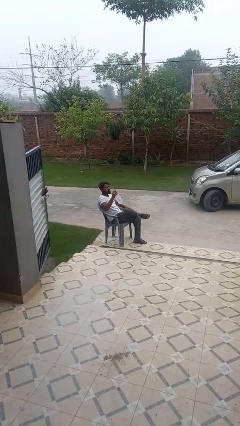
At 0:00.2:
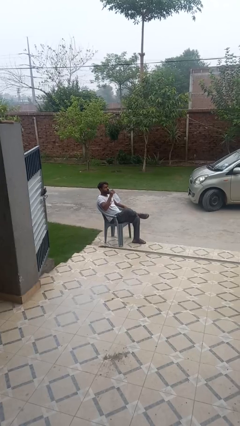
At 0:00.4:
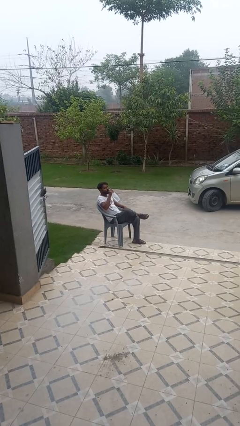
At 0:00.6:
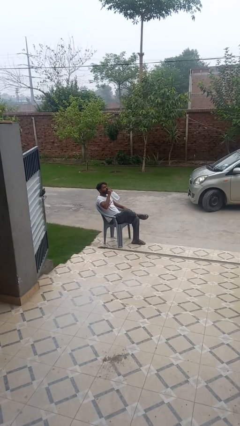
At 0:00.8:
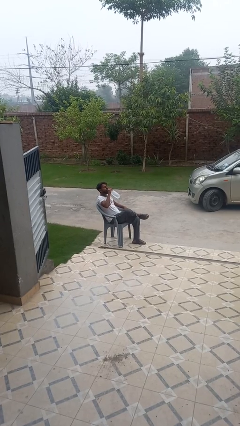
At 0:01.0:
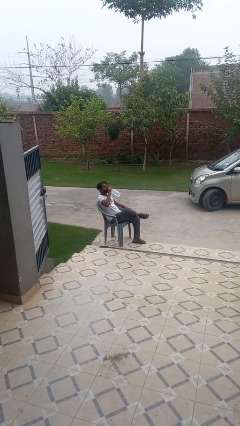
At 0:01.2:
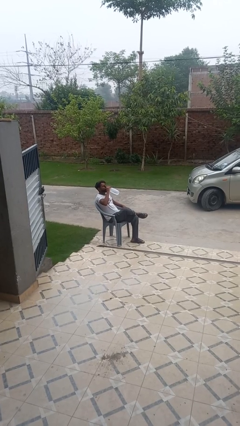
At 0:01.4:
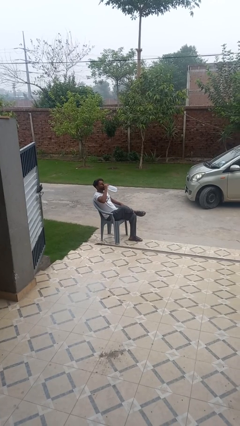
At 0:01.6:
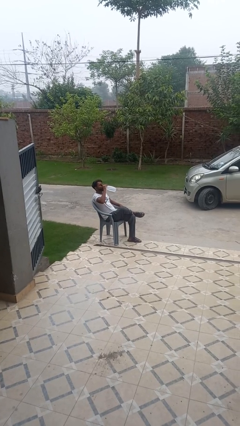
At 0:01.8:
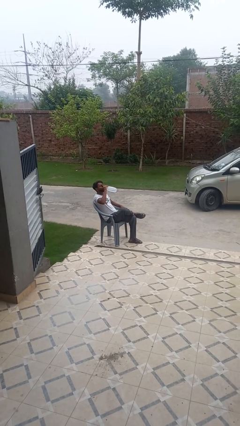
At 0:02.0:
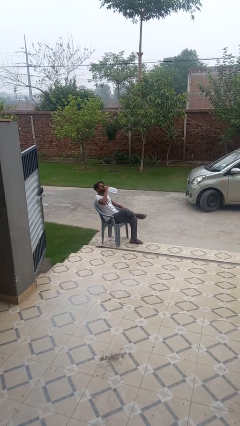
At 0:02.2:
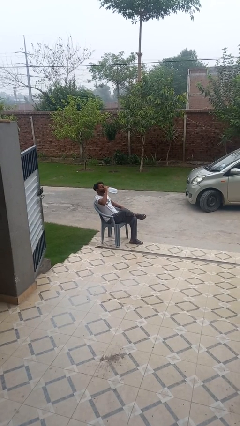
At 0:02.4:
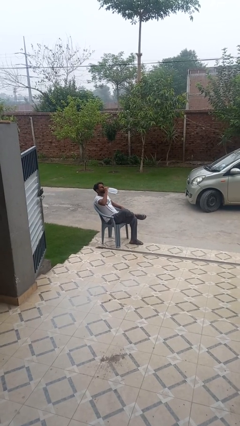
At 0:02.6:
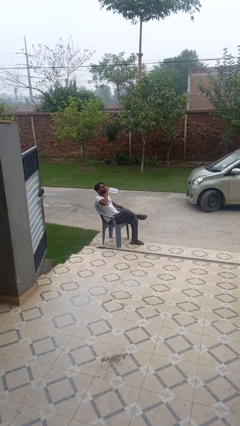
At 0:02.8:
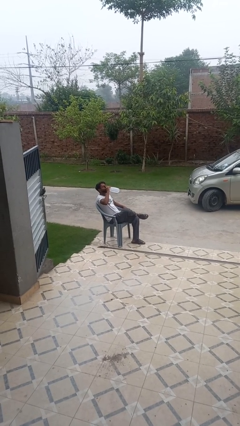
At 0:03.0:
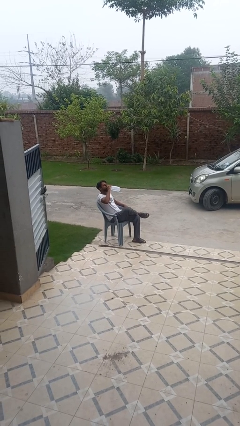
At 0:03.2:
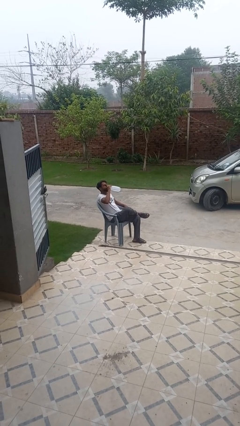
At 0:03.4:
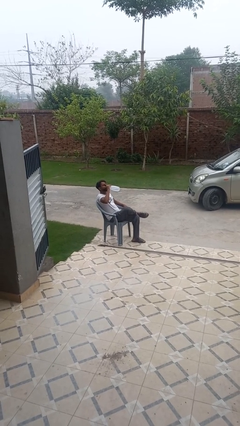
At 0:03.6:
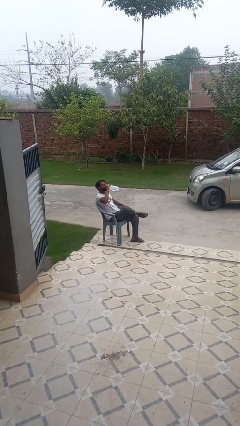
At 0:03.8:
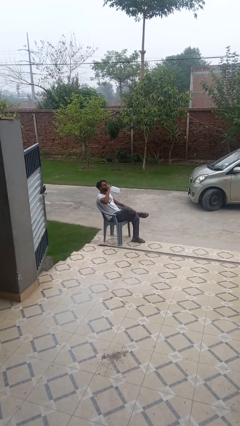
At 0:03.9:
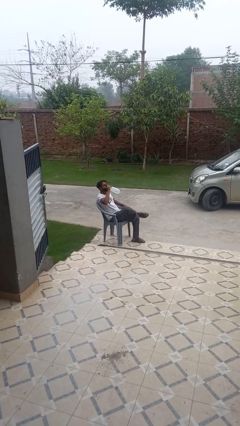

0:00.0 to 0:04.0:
person drinks from bottle

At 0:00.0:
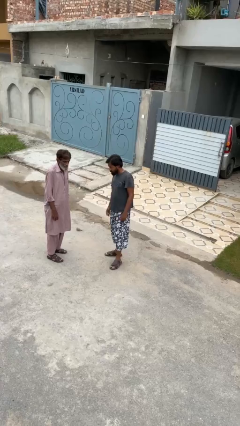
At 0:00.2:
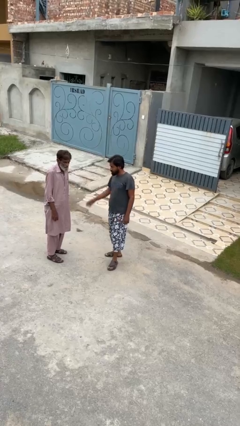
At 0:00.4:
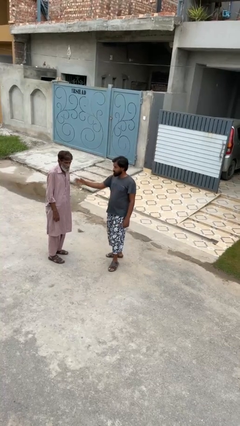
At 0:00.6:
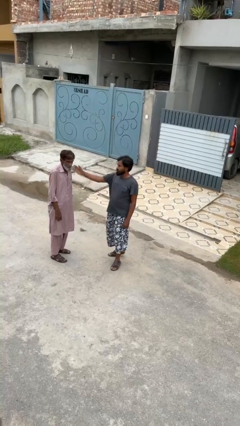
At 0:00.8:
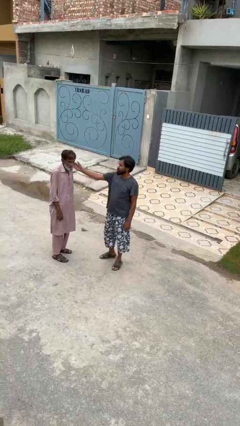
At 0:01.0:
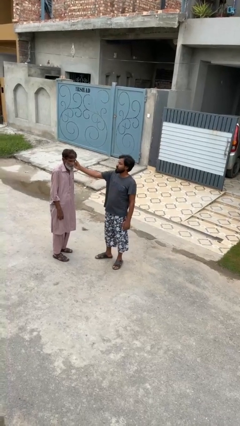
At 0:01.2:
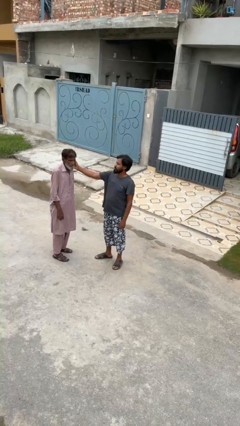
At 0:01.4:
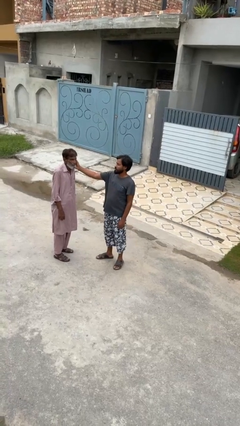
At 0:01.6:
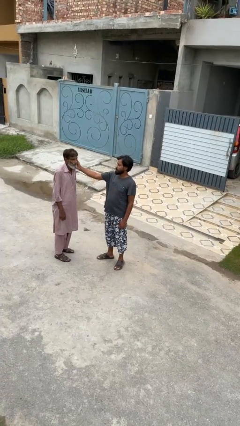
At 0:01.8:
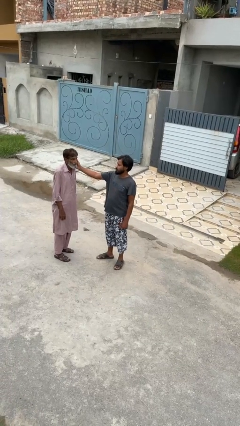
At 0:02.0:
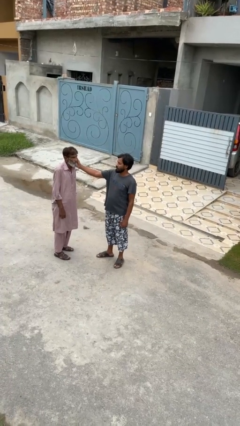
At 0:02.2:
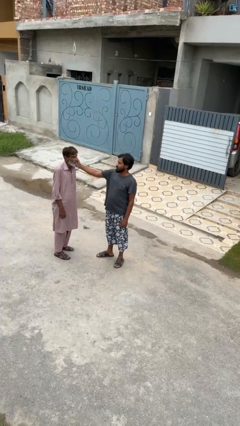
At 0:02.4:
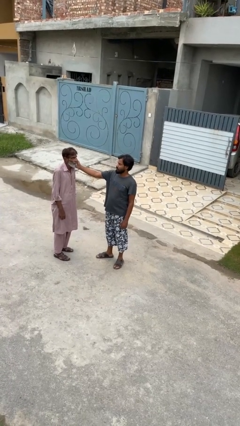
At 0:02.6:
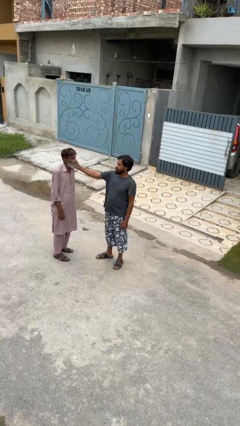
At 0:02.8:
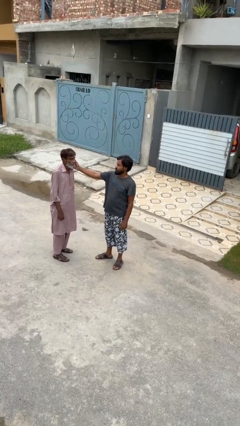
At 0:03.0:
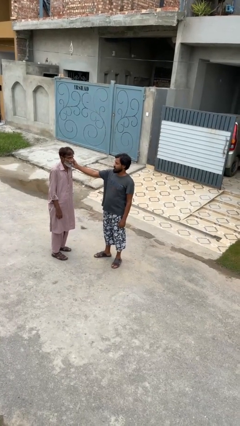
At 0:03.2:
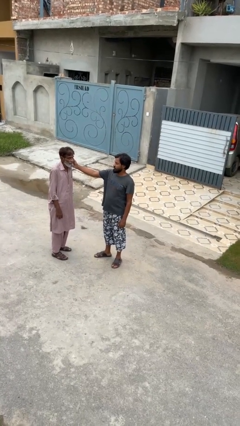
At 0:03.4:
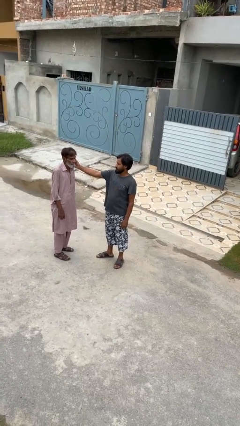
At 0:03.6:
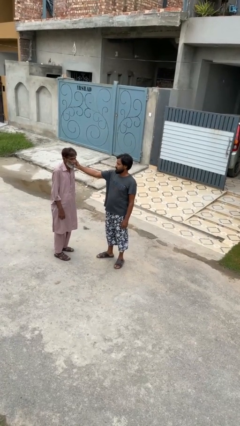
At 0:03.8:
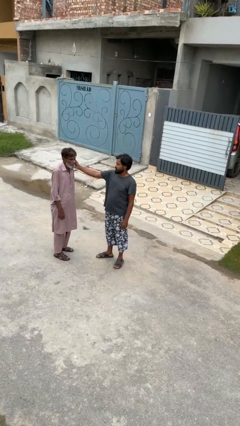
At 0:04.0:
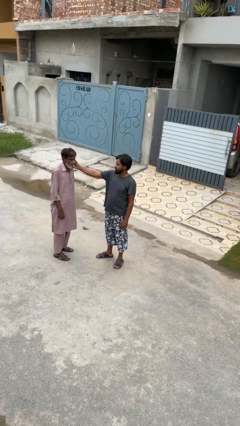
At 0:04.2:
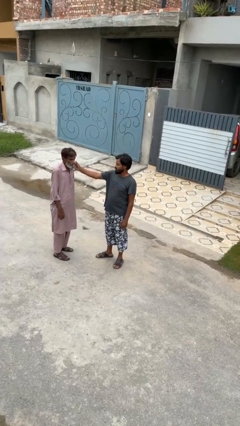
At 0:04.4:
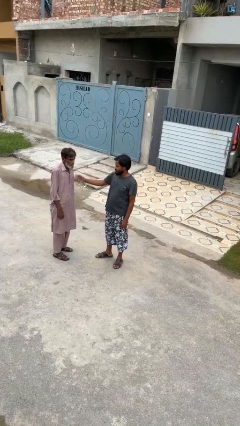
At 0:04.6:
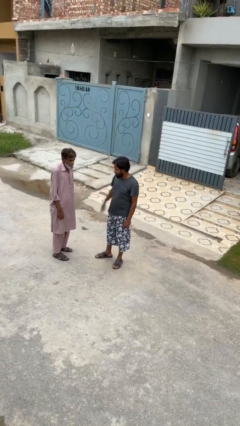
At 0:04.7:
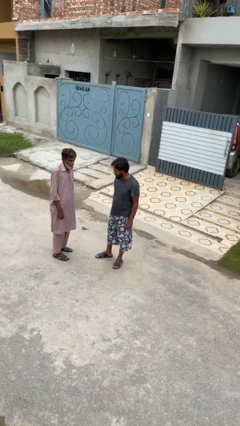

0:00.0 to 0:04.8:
person touches face of person

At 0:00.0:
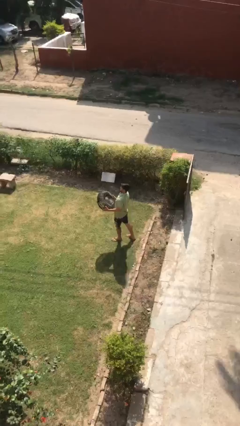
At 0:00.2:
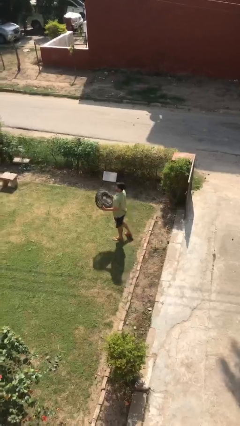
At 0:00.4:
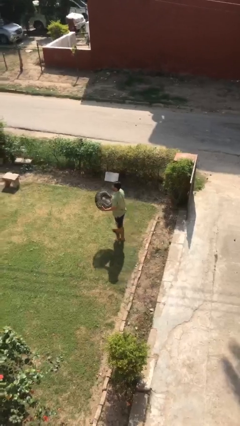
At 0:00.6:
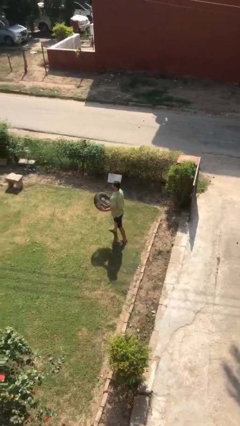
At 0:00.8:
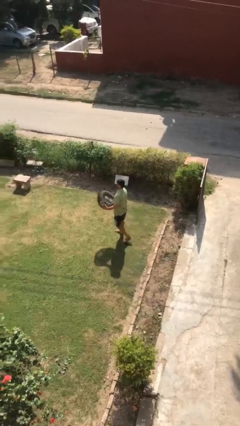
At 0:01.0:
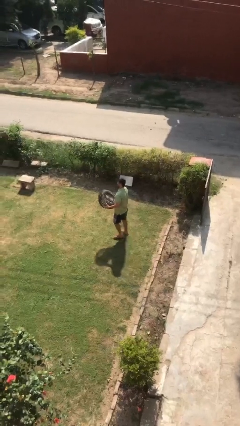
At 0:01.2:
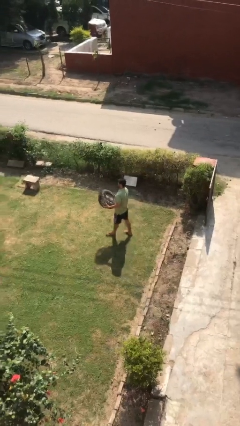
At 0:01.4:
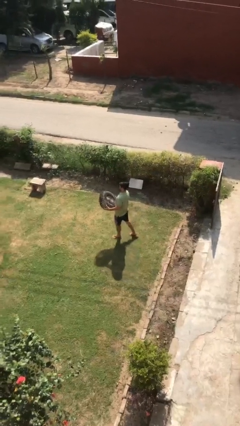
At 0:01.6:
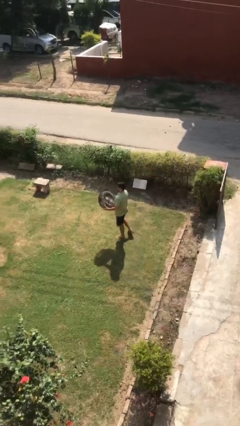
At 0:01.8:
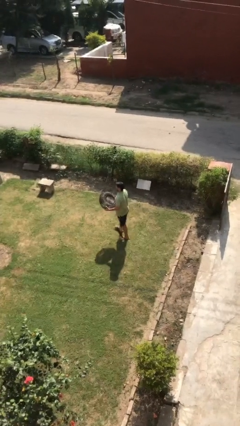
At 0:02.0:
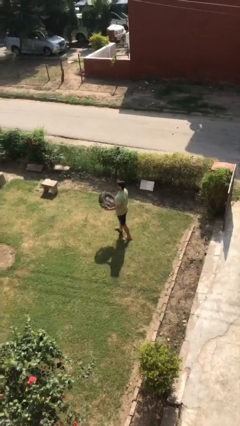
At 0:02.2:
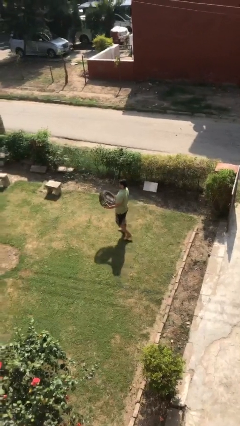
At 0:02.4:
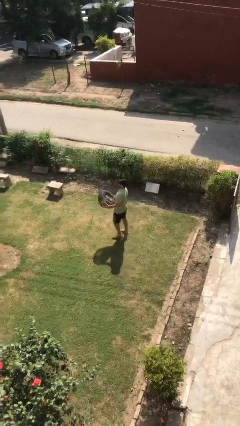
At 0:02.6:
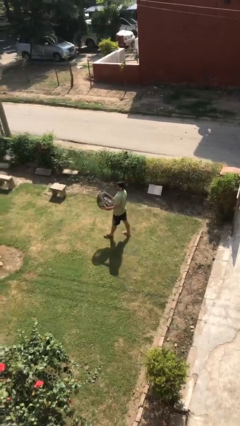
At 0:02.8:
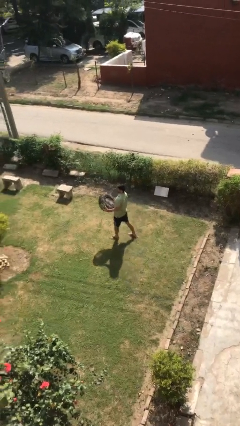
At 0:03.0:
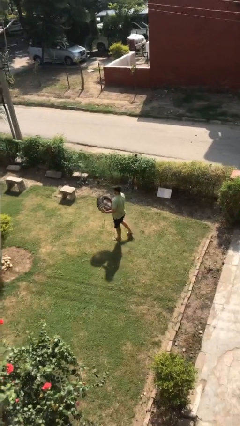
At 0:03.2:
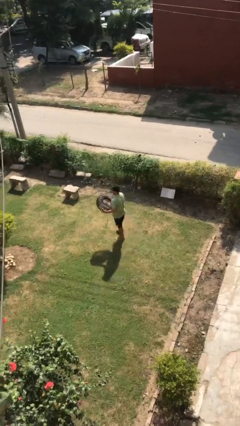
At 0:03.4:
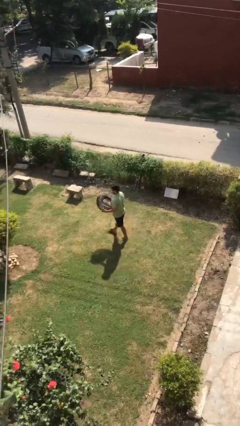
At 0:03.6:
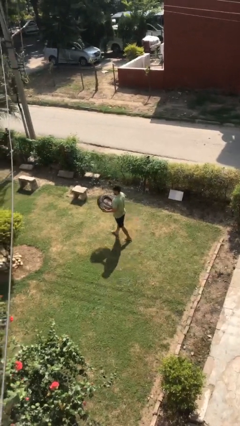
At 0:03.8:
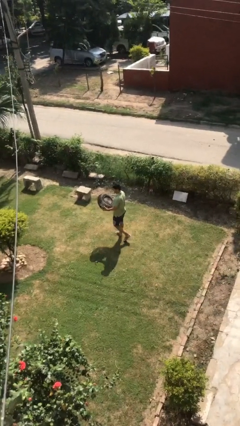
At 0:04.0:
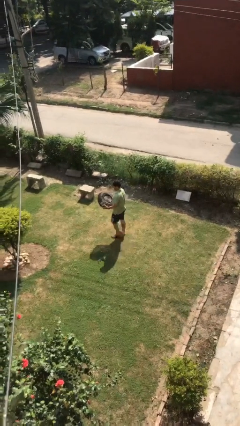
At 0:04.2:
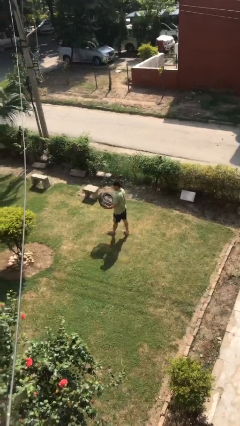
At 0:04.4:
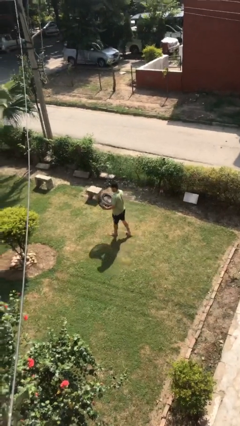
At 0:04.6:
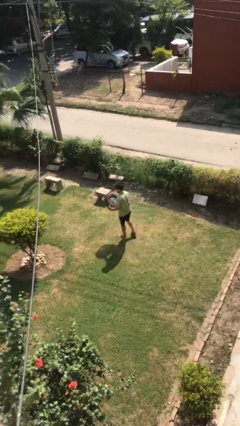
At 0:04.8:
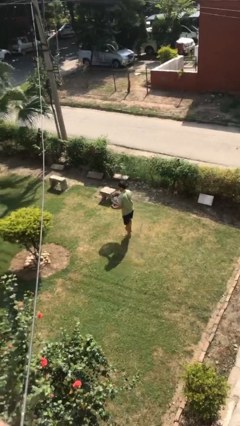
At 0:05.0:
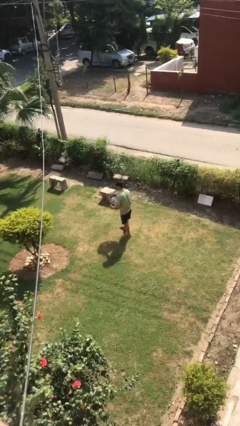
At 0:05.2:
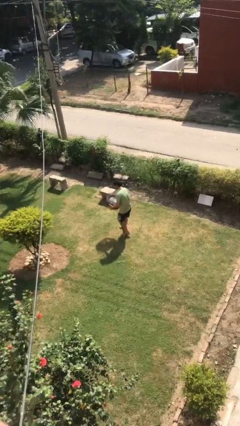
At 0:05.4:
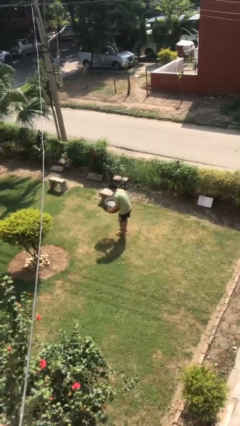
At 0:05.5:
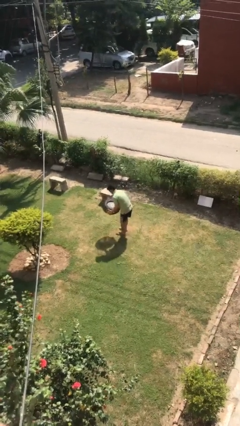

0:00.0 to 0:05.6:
person carries heavy object

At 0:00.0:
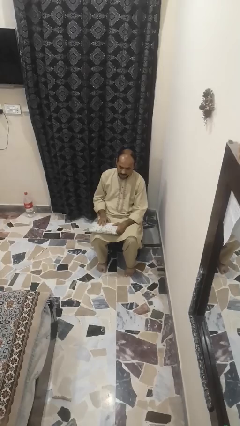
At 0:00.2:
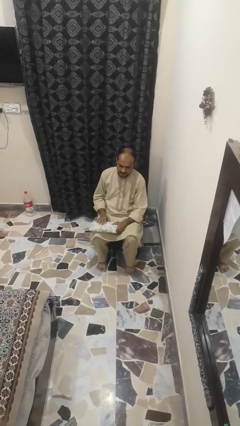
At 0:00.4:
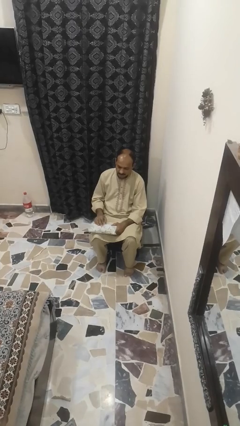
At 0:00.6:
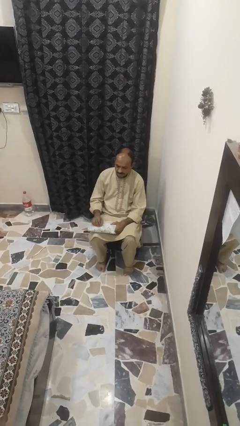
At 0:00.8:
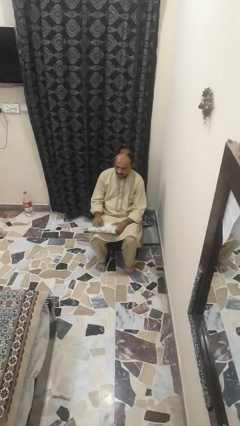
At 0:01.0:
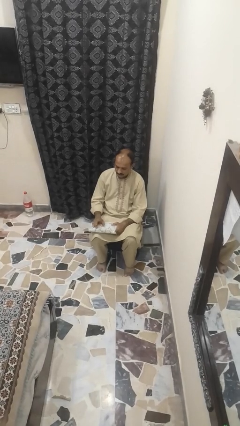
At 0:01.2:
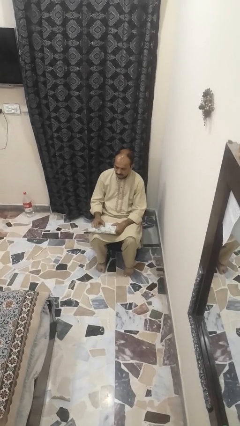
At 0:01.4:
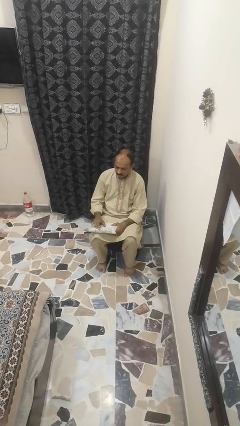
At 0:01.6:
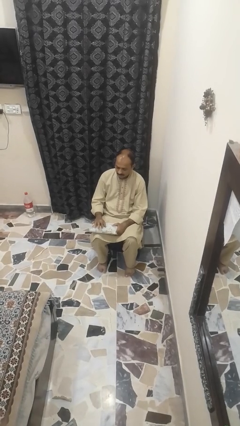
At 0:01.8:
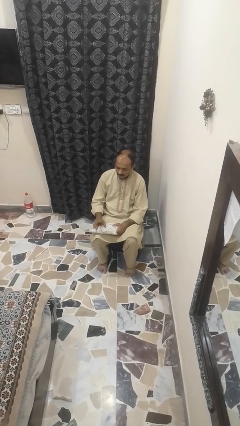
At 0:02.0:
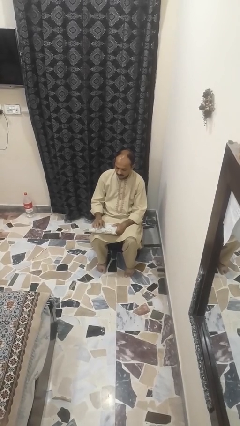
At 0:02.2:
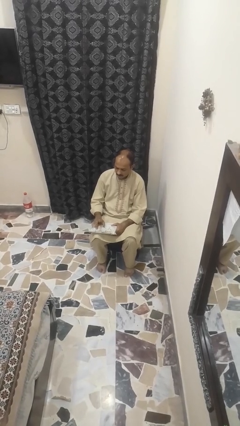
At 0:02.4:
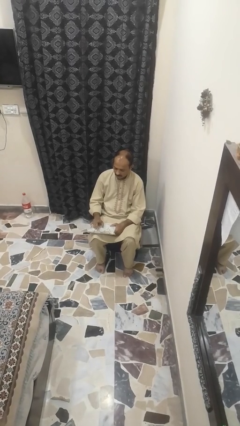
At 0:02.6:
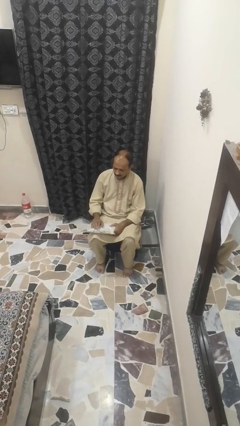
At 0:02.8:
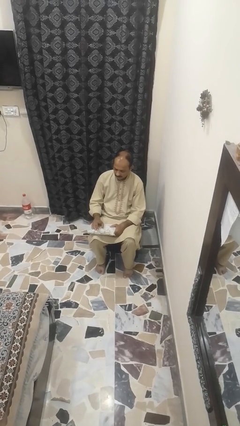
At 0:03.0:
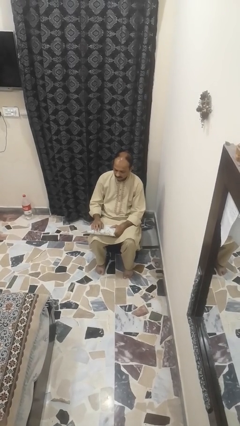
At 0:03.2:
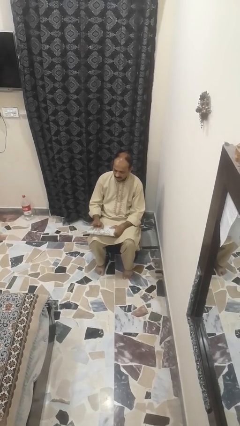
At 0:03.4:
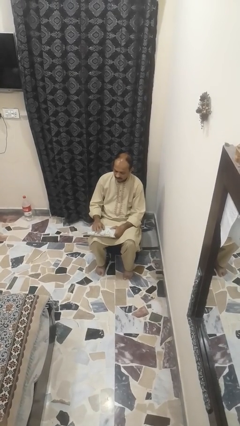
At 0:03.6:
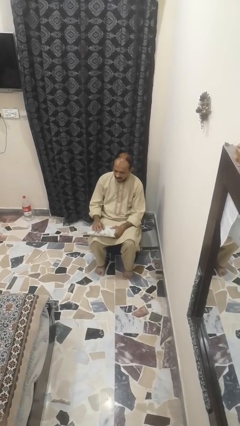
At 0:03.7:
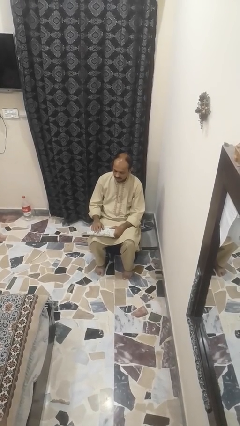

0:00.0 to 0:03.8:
person taps object with finger
